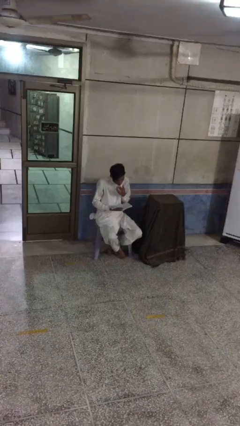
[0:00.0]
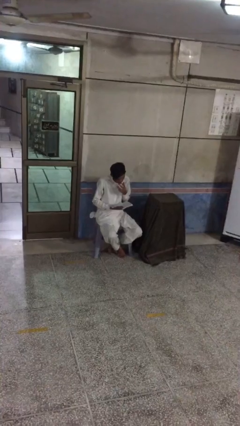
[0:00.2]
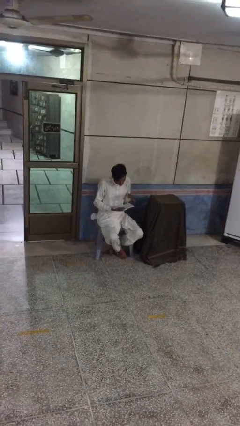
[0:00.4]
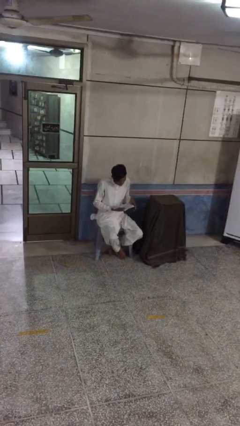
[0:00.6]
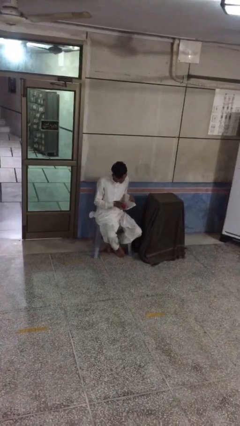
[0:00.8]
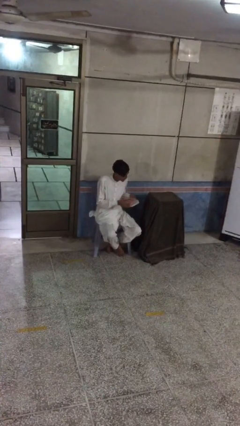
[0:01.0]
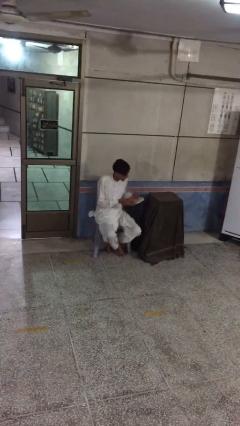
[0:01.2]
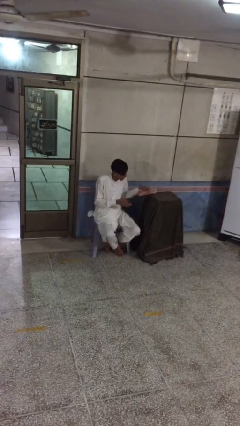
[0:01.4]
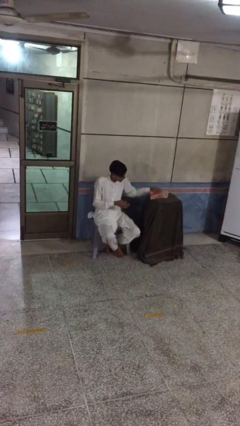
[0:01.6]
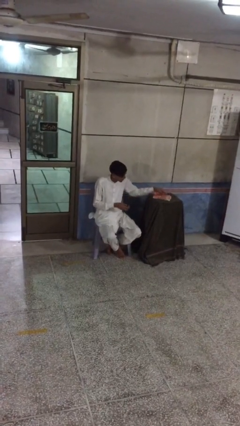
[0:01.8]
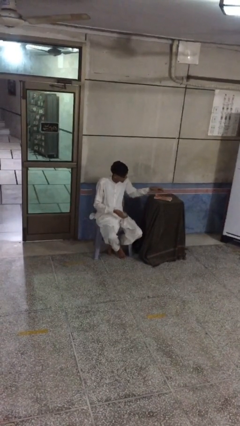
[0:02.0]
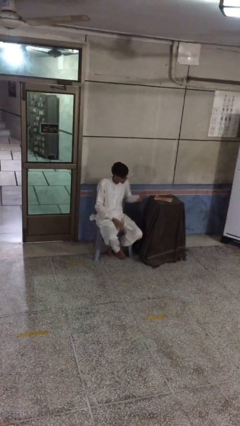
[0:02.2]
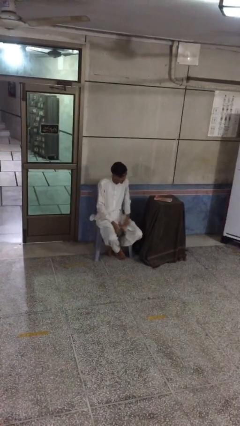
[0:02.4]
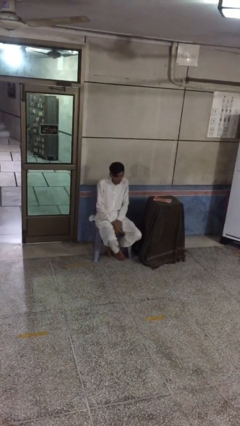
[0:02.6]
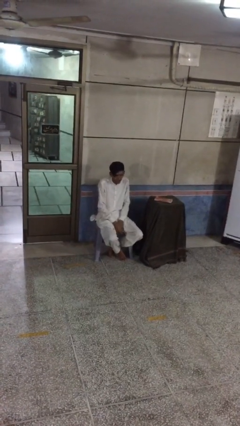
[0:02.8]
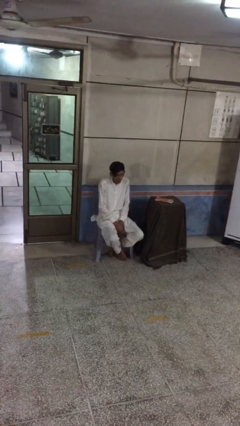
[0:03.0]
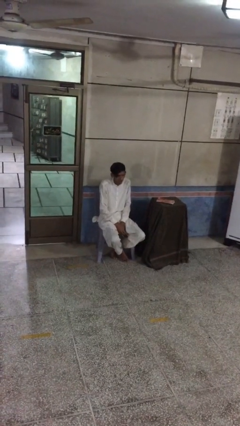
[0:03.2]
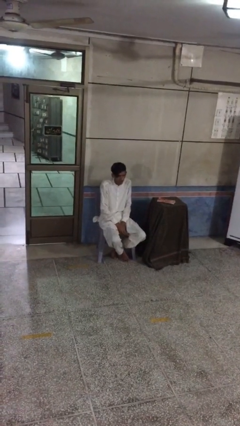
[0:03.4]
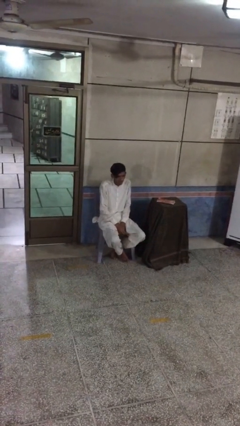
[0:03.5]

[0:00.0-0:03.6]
person puts down object on table

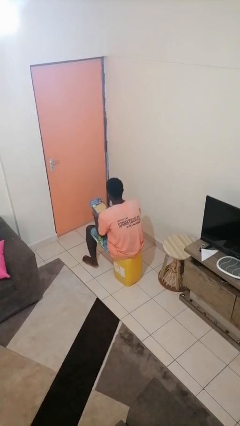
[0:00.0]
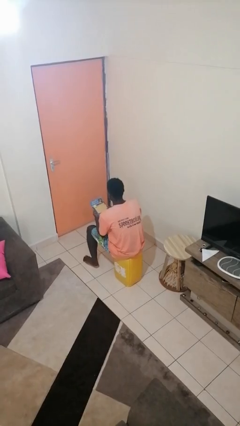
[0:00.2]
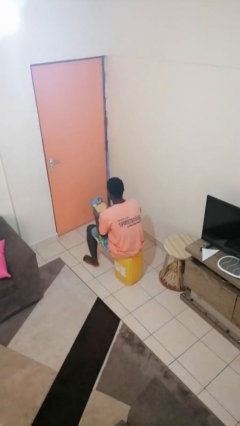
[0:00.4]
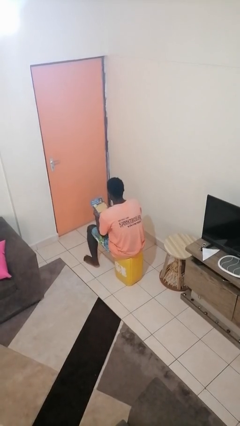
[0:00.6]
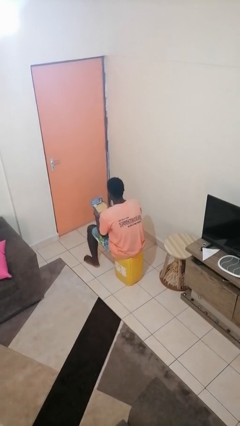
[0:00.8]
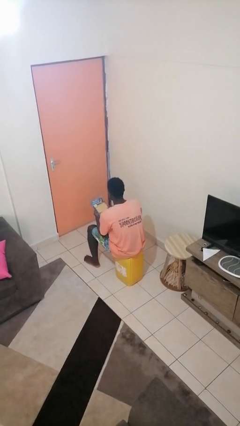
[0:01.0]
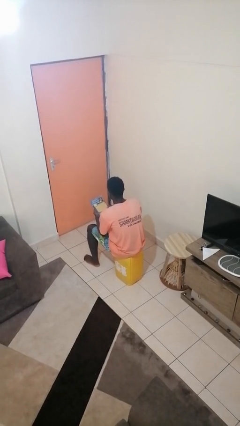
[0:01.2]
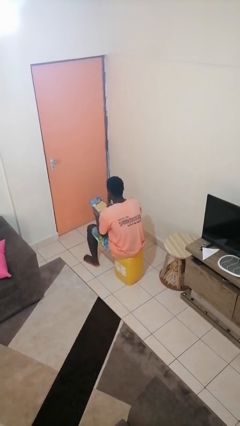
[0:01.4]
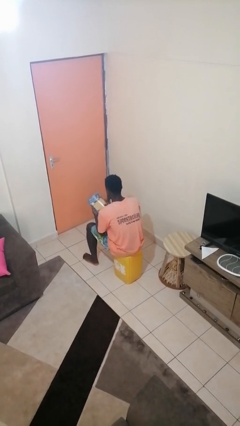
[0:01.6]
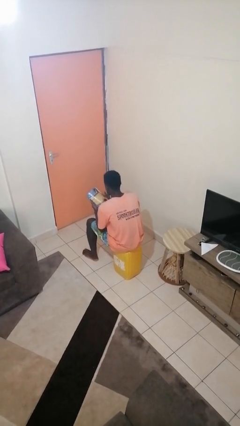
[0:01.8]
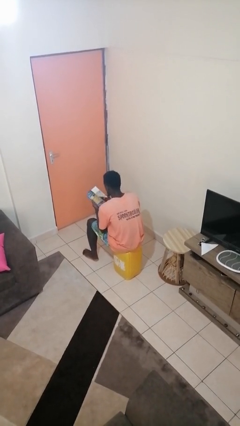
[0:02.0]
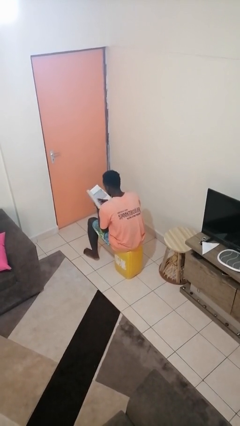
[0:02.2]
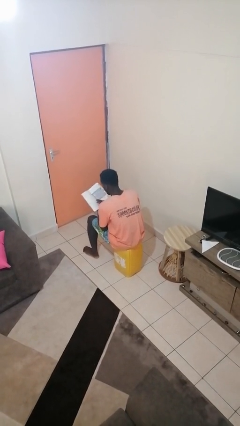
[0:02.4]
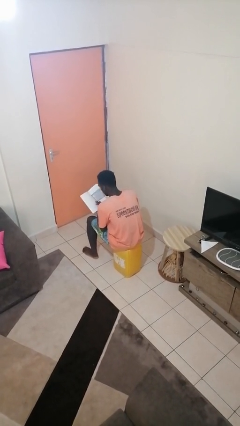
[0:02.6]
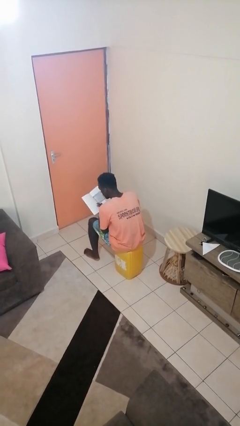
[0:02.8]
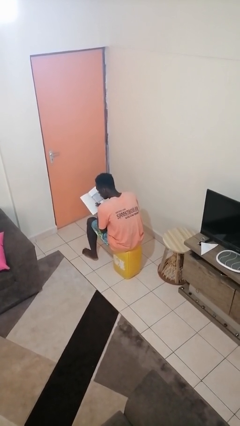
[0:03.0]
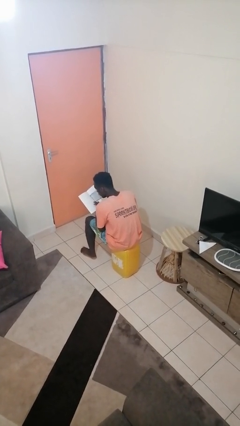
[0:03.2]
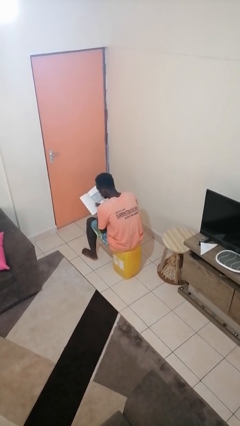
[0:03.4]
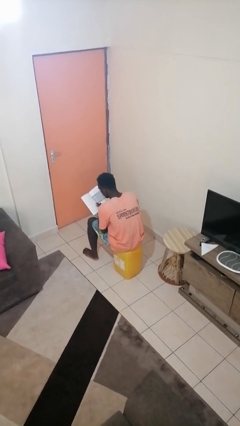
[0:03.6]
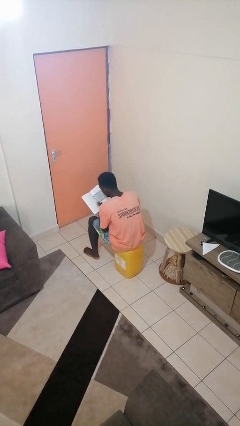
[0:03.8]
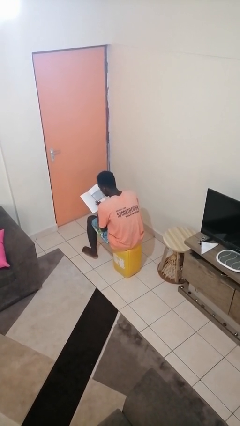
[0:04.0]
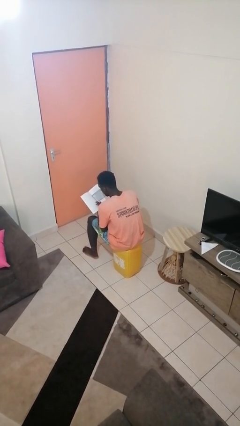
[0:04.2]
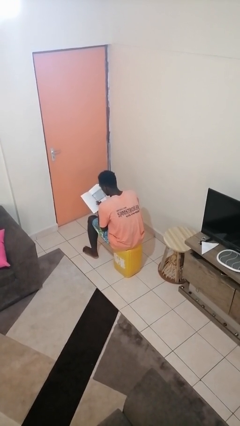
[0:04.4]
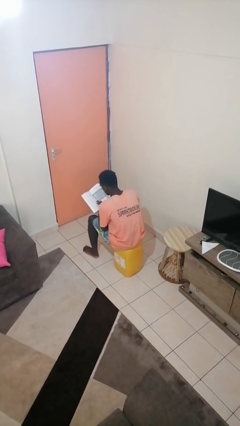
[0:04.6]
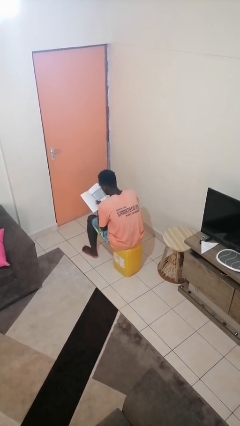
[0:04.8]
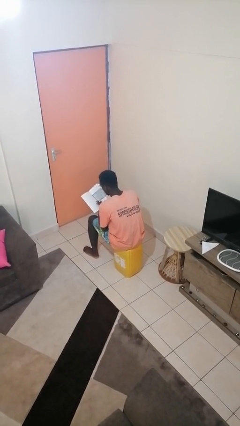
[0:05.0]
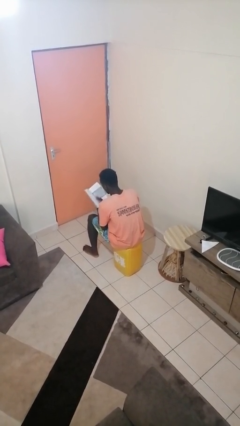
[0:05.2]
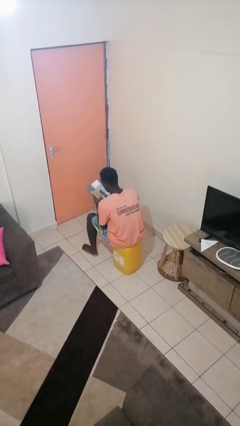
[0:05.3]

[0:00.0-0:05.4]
person reads book

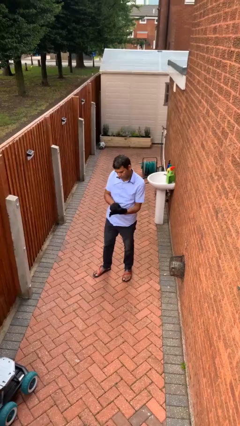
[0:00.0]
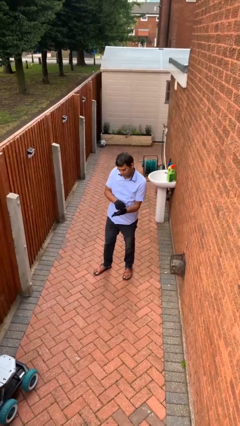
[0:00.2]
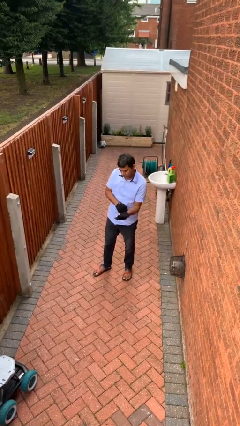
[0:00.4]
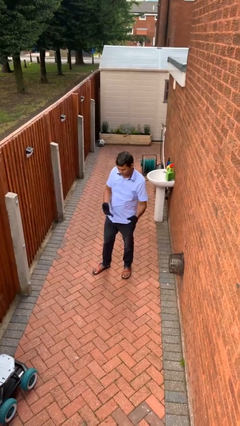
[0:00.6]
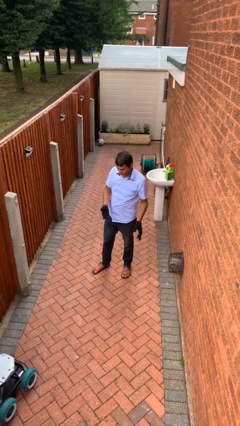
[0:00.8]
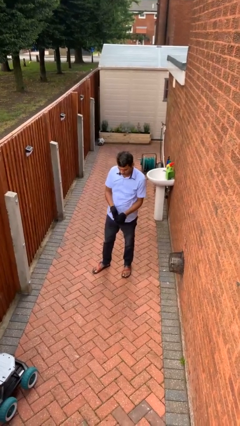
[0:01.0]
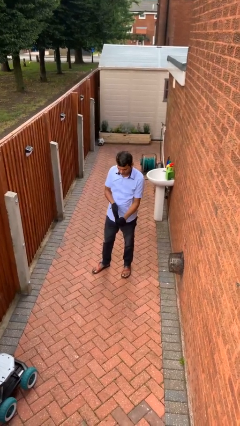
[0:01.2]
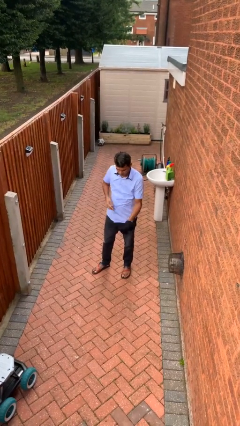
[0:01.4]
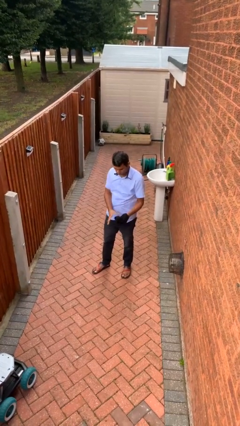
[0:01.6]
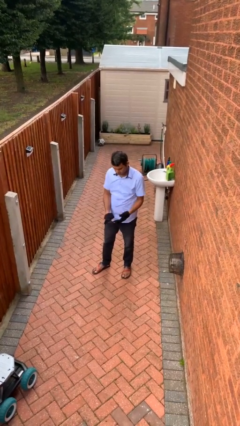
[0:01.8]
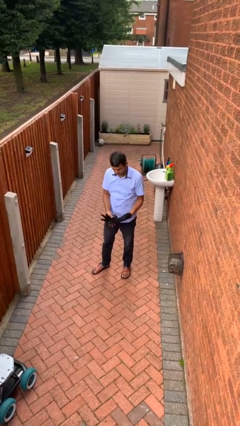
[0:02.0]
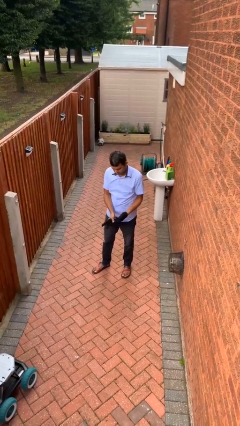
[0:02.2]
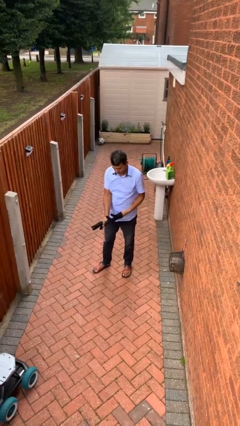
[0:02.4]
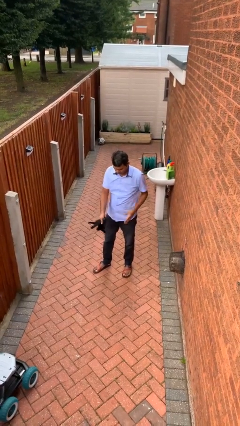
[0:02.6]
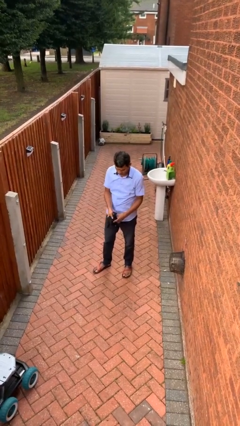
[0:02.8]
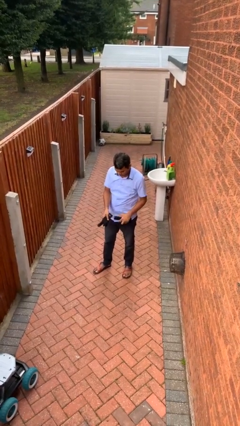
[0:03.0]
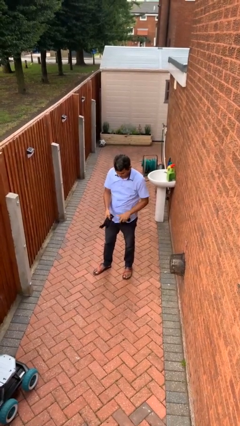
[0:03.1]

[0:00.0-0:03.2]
person takes off gloves

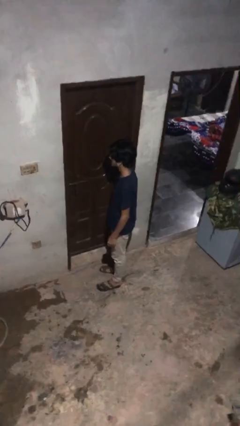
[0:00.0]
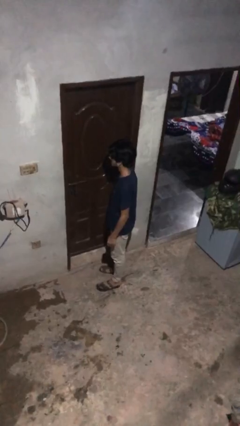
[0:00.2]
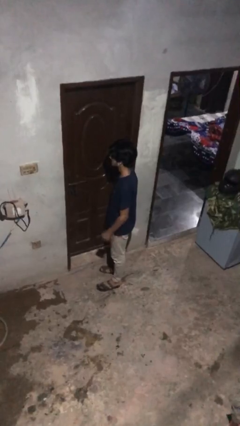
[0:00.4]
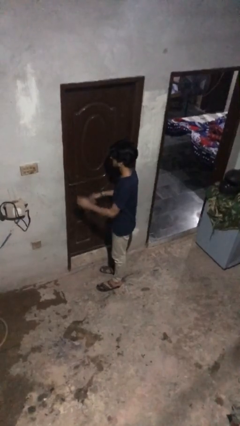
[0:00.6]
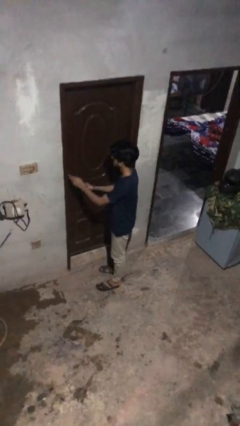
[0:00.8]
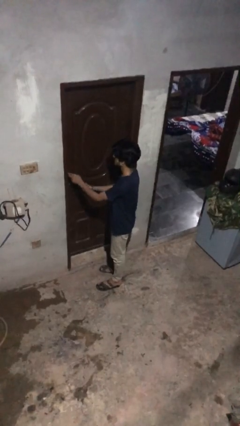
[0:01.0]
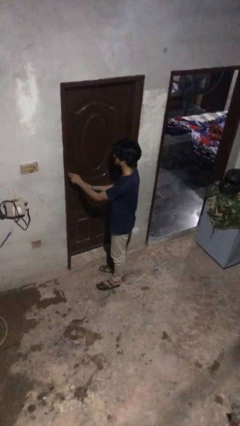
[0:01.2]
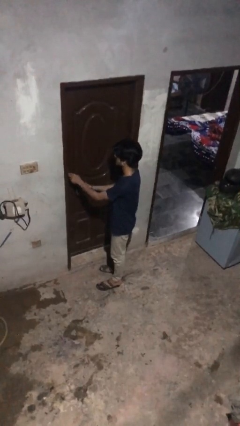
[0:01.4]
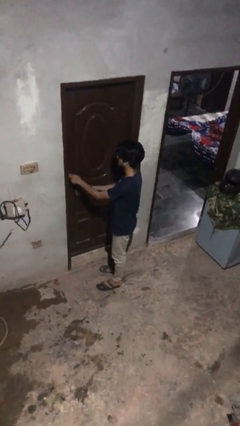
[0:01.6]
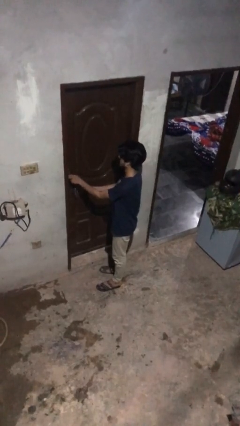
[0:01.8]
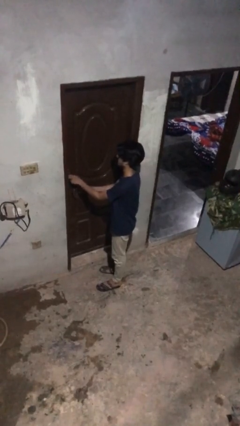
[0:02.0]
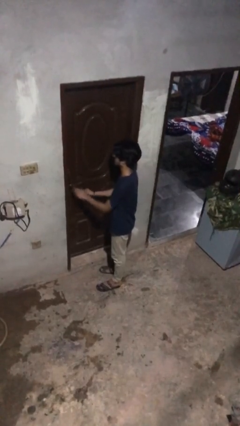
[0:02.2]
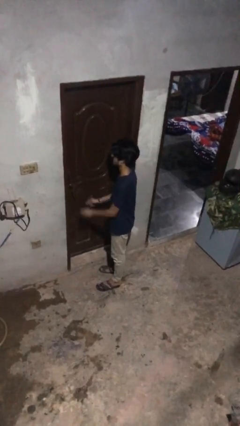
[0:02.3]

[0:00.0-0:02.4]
person locks door with keys

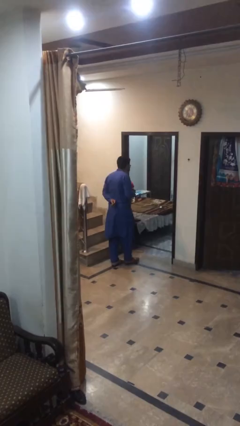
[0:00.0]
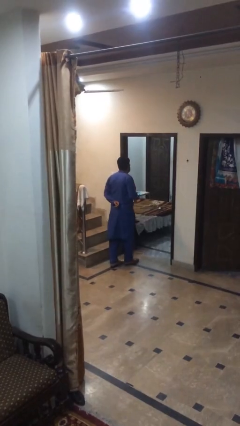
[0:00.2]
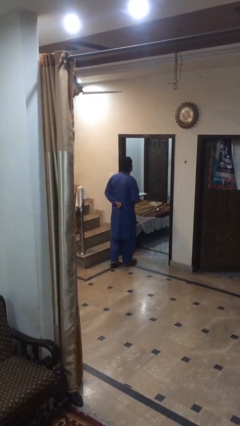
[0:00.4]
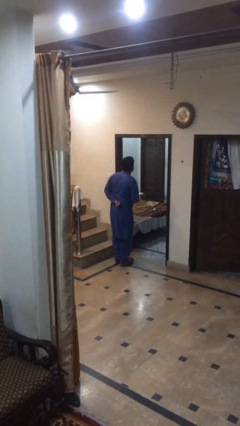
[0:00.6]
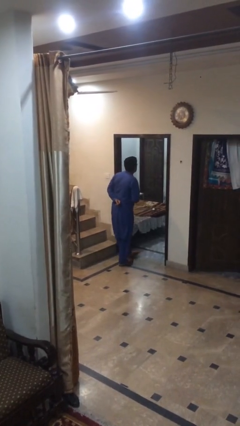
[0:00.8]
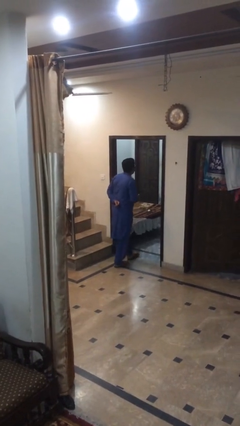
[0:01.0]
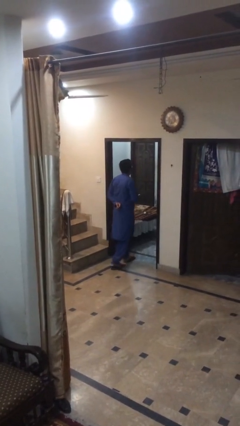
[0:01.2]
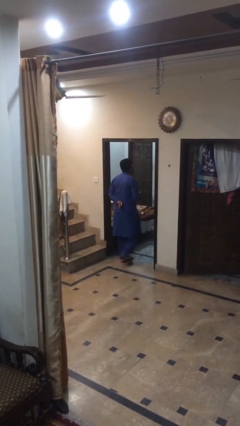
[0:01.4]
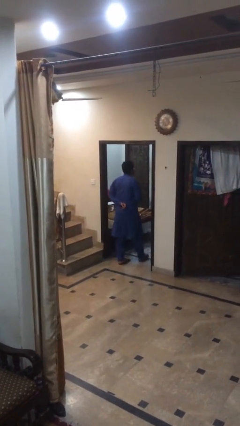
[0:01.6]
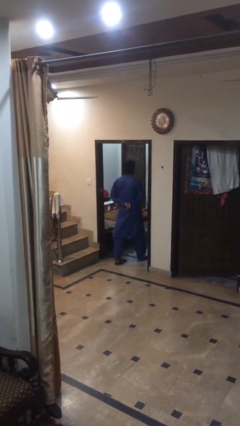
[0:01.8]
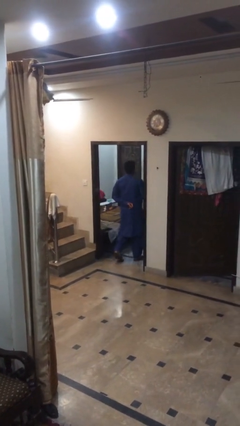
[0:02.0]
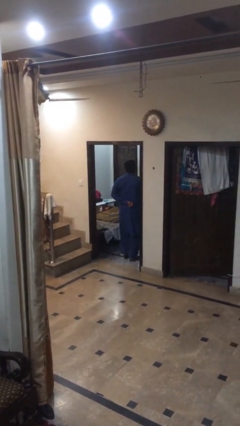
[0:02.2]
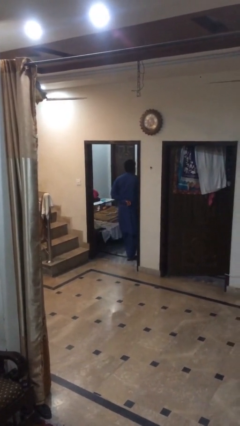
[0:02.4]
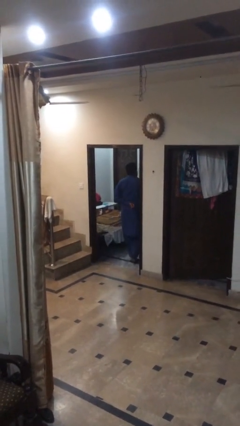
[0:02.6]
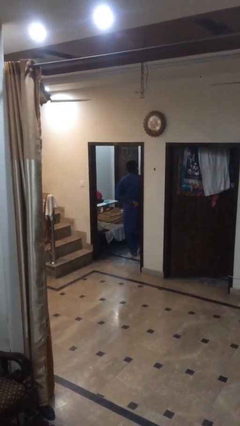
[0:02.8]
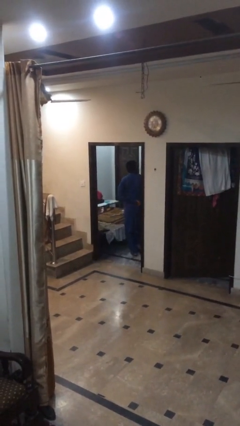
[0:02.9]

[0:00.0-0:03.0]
person enters scene through structure
